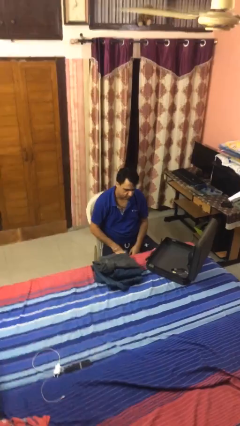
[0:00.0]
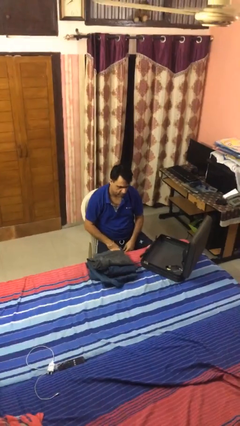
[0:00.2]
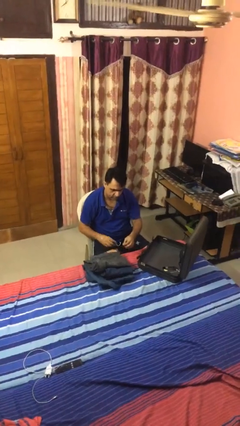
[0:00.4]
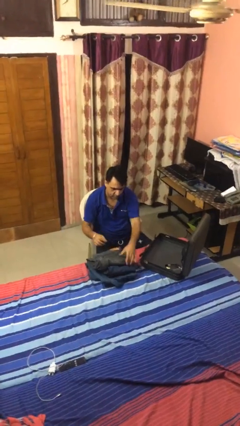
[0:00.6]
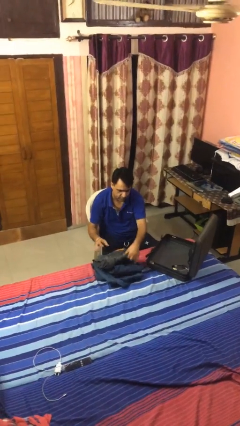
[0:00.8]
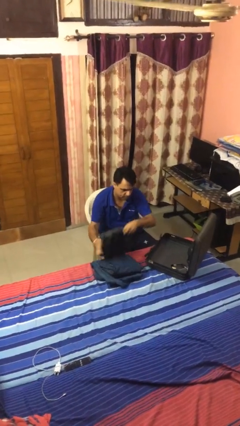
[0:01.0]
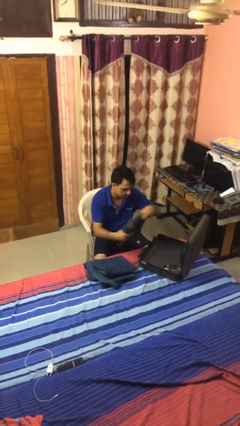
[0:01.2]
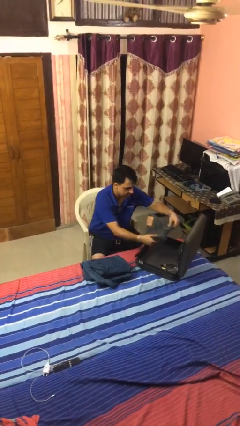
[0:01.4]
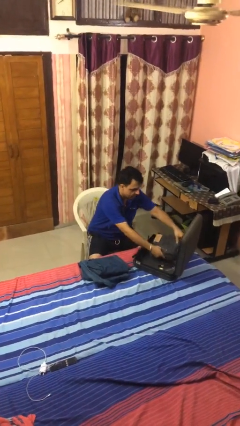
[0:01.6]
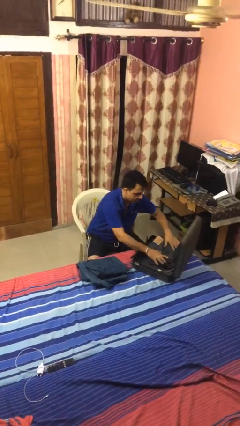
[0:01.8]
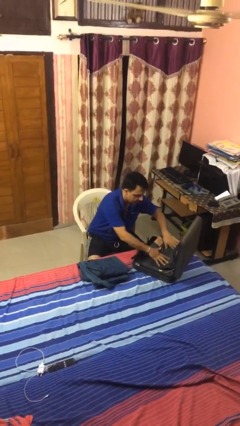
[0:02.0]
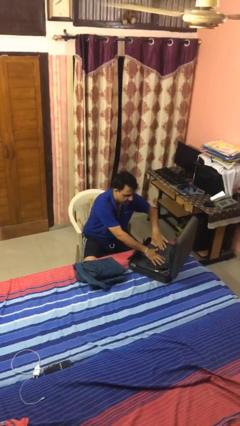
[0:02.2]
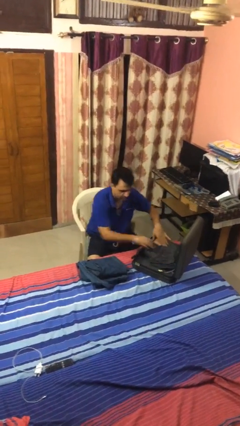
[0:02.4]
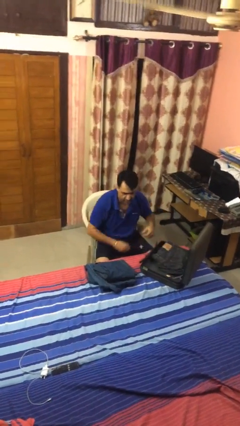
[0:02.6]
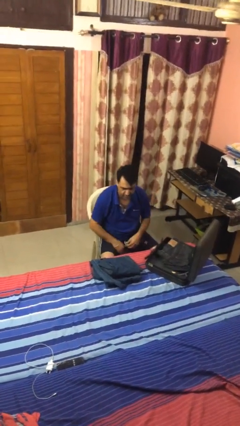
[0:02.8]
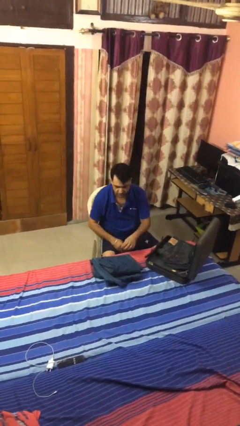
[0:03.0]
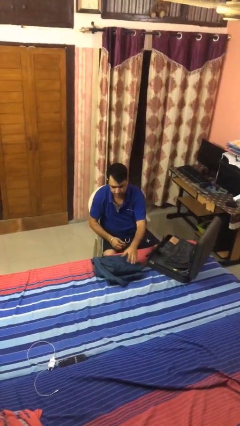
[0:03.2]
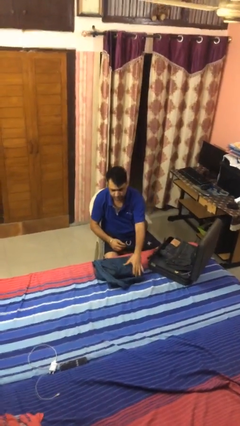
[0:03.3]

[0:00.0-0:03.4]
person loads clothes into suitcase

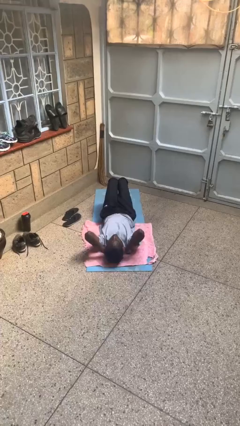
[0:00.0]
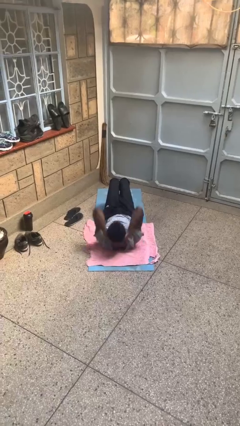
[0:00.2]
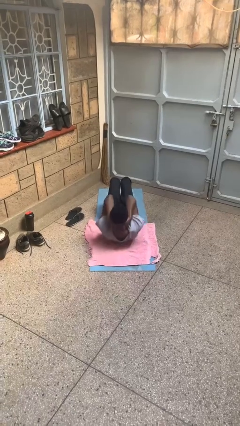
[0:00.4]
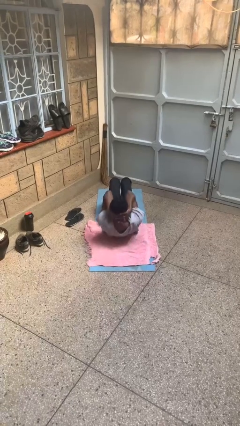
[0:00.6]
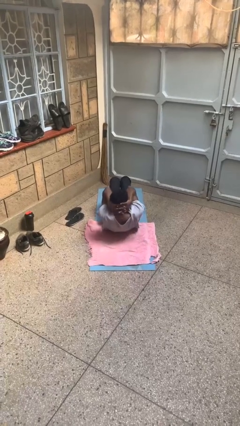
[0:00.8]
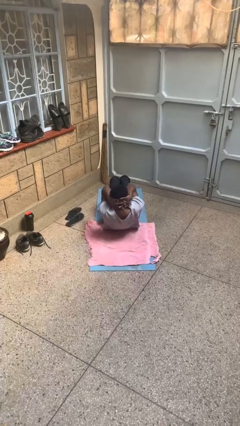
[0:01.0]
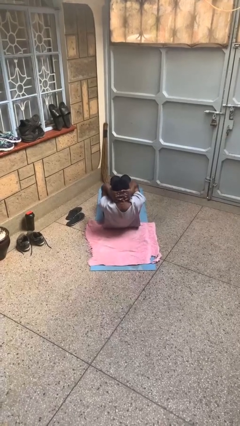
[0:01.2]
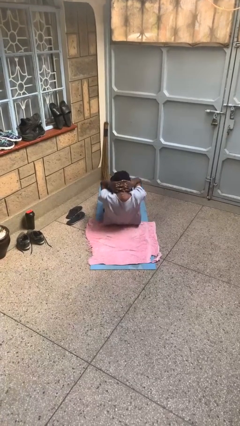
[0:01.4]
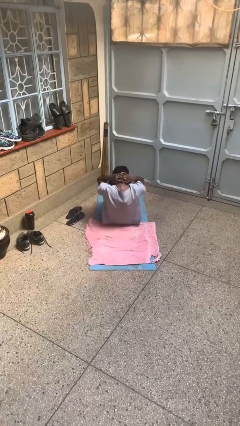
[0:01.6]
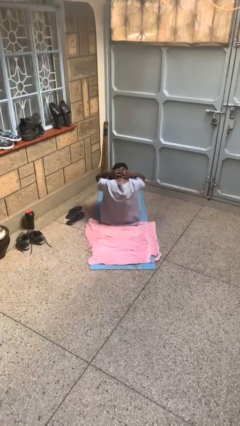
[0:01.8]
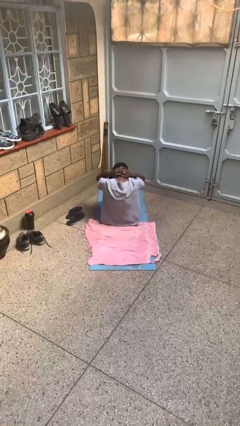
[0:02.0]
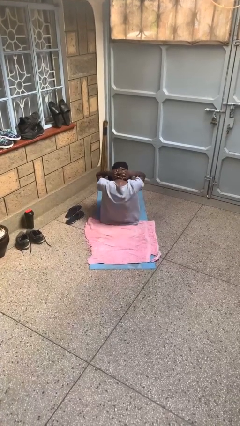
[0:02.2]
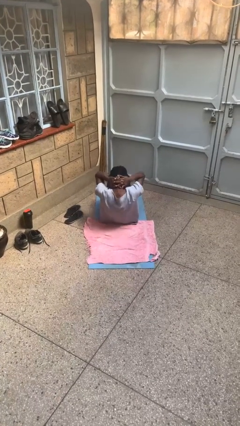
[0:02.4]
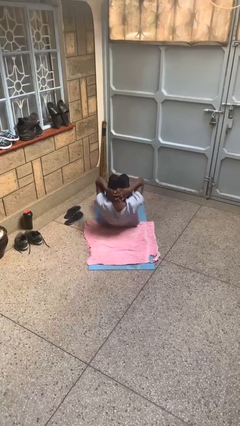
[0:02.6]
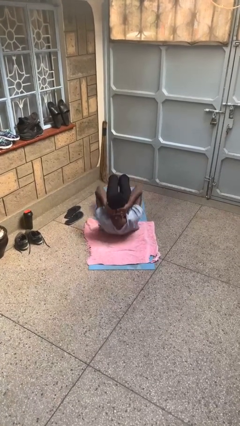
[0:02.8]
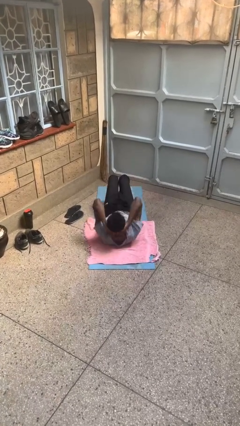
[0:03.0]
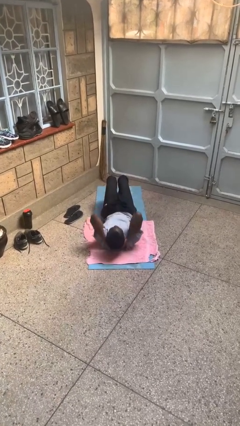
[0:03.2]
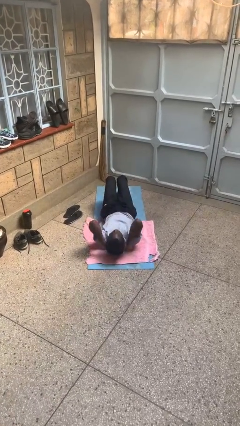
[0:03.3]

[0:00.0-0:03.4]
person exercises with situp

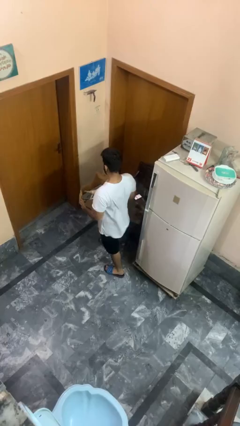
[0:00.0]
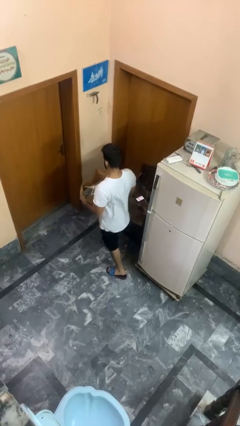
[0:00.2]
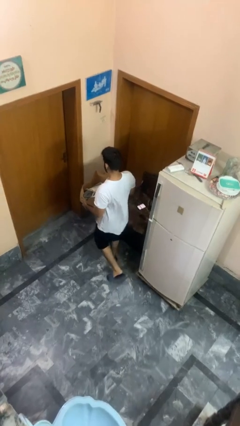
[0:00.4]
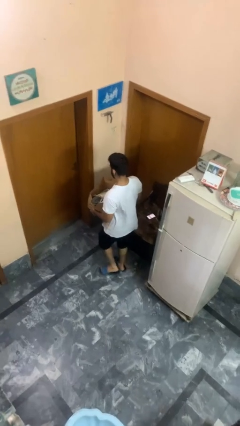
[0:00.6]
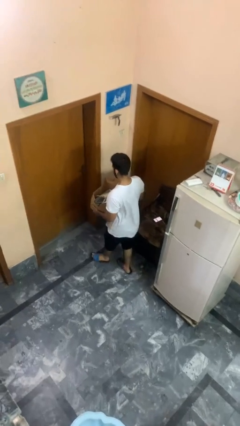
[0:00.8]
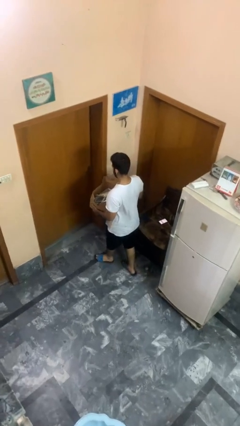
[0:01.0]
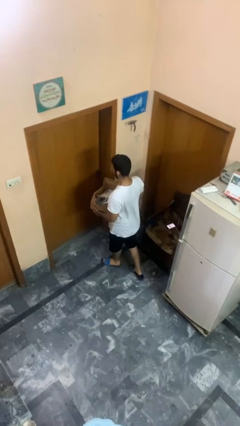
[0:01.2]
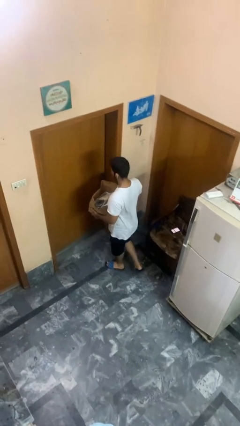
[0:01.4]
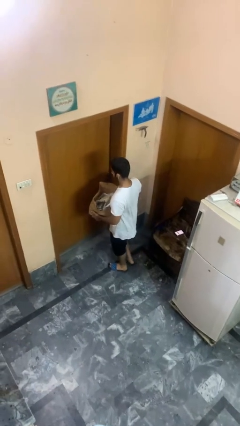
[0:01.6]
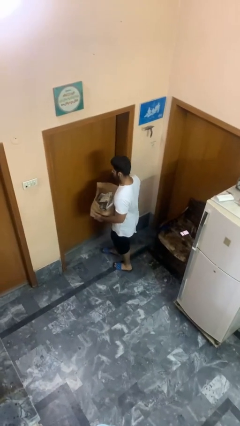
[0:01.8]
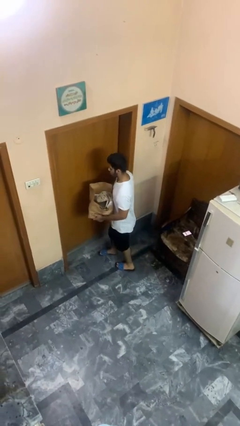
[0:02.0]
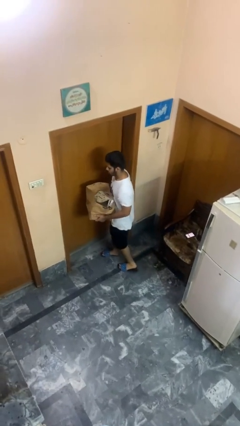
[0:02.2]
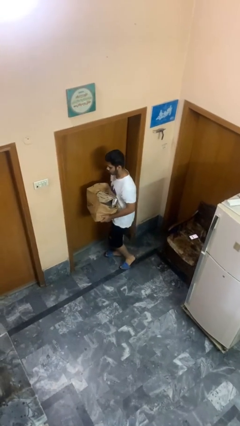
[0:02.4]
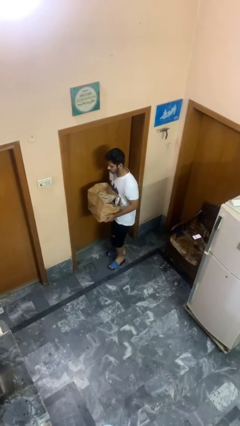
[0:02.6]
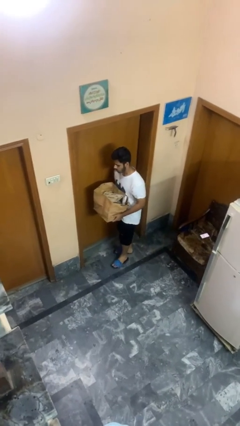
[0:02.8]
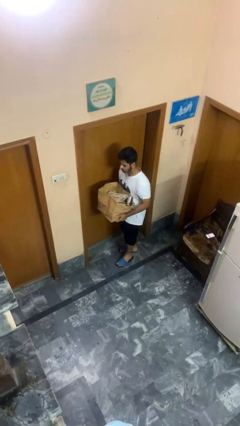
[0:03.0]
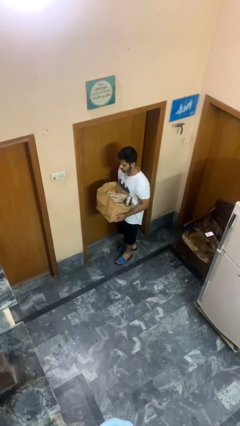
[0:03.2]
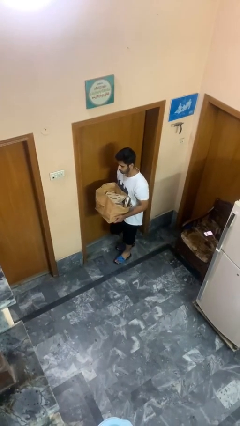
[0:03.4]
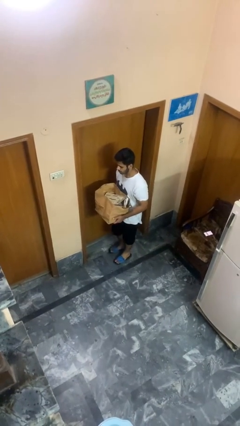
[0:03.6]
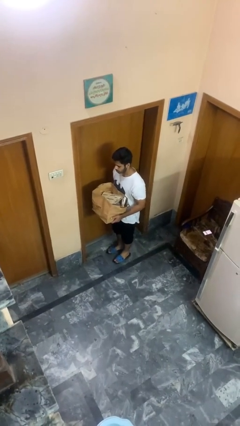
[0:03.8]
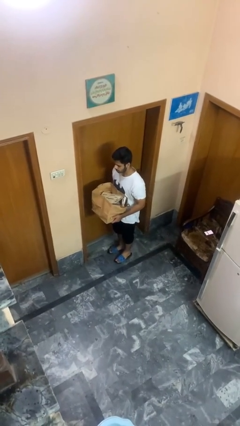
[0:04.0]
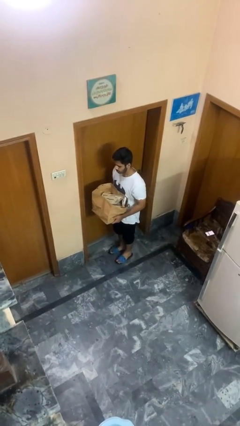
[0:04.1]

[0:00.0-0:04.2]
person carries groceries

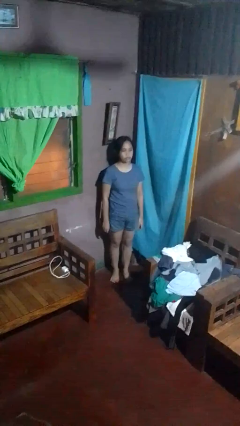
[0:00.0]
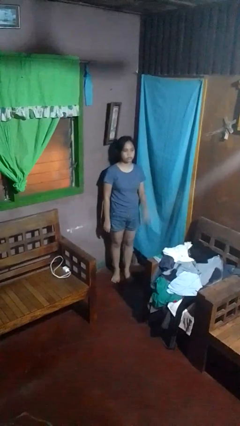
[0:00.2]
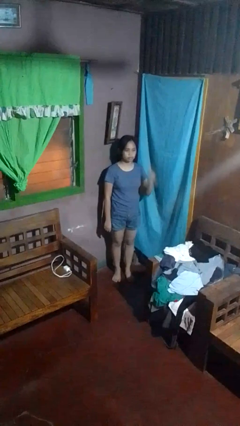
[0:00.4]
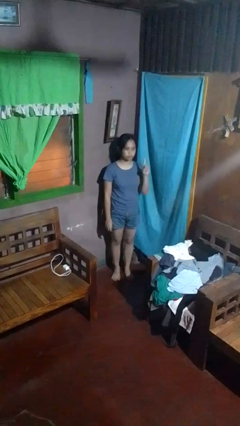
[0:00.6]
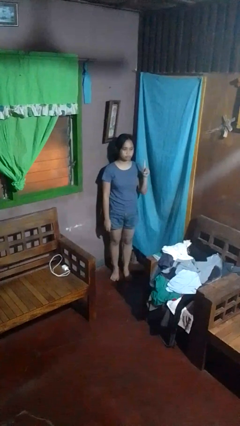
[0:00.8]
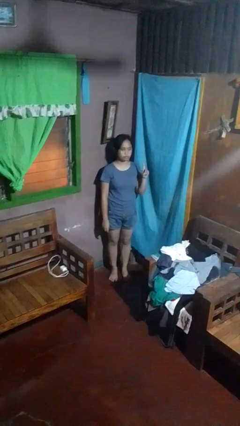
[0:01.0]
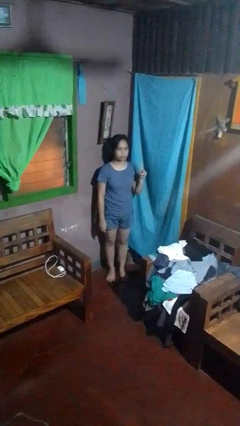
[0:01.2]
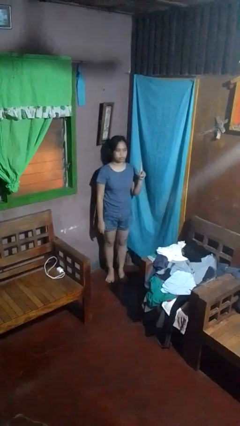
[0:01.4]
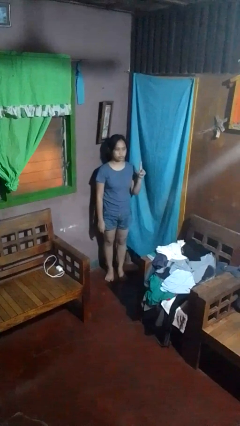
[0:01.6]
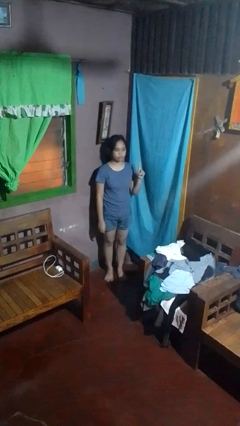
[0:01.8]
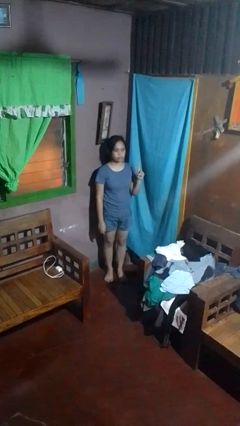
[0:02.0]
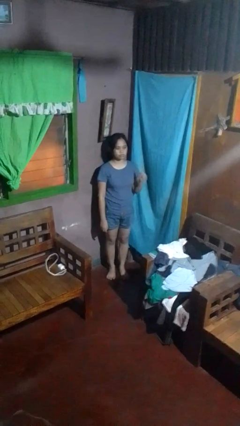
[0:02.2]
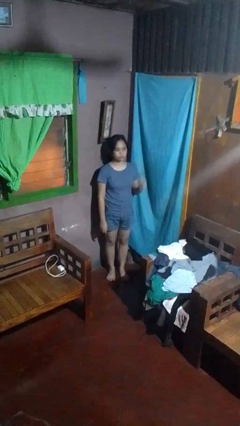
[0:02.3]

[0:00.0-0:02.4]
person gestures number one

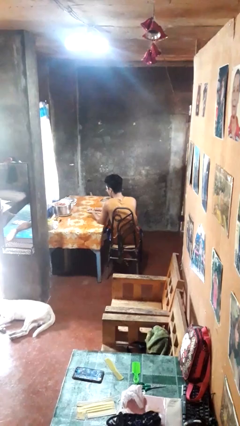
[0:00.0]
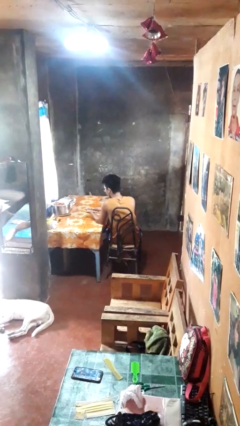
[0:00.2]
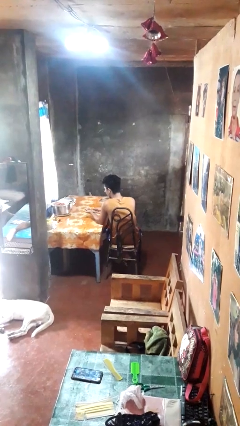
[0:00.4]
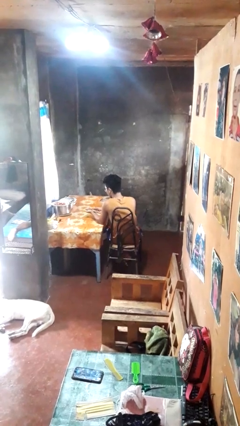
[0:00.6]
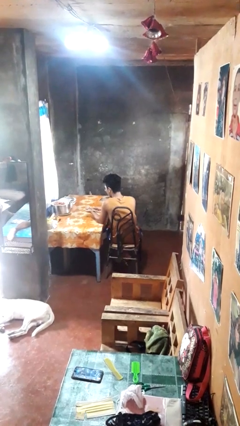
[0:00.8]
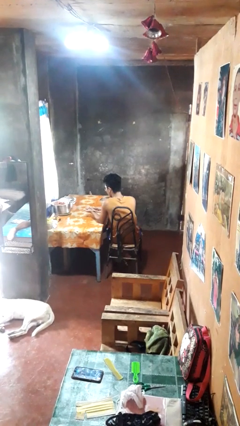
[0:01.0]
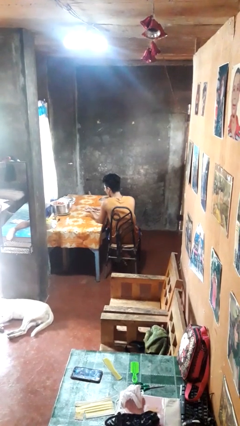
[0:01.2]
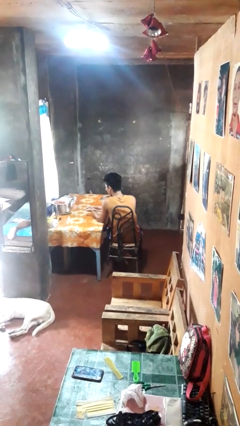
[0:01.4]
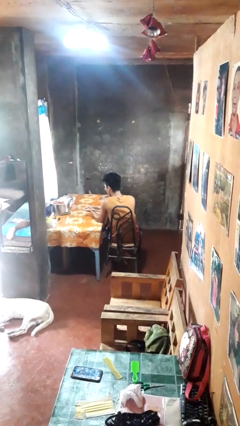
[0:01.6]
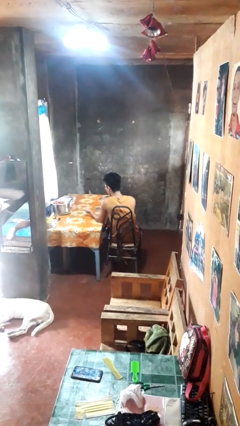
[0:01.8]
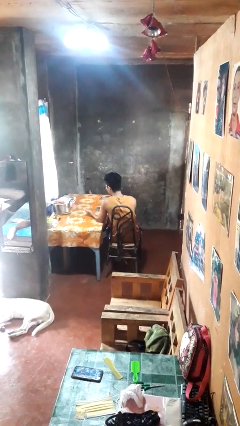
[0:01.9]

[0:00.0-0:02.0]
person clips fingernails

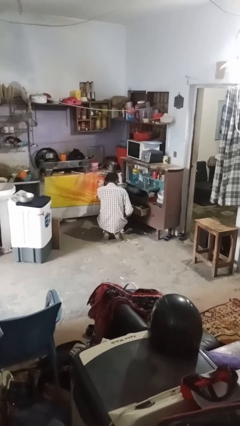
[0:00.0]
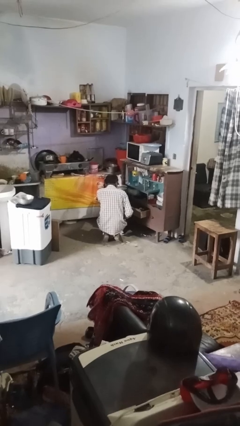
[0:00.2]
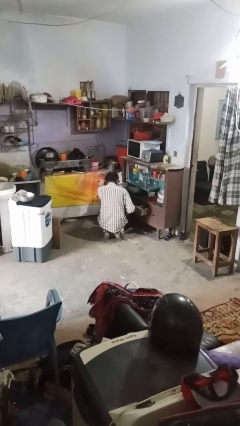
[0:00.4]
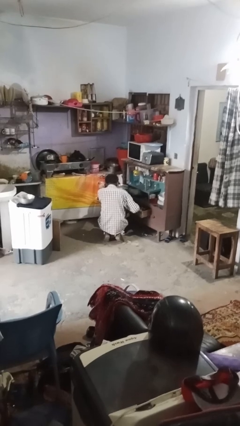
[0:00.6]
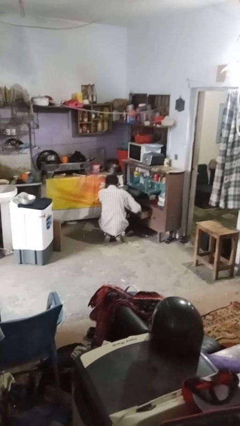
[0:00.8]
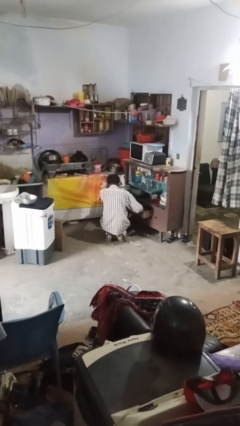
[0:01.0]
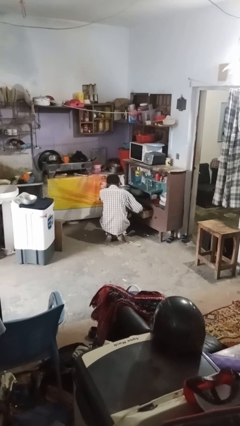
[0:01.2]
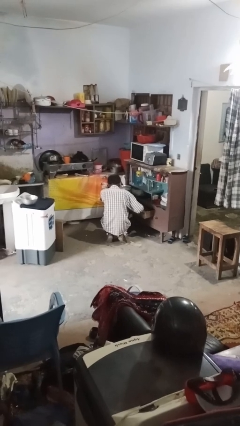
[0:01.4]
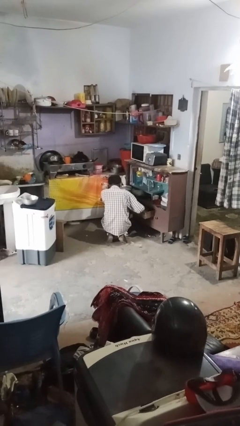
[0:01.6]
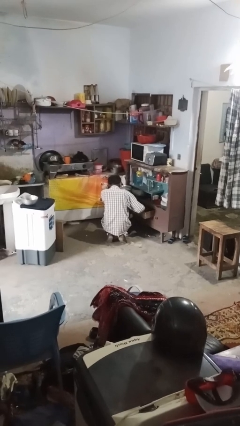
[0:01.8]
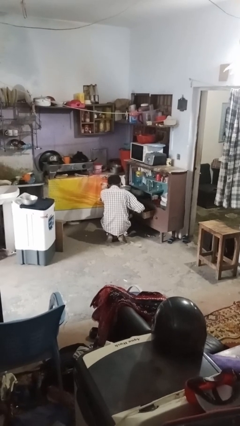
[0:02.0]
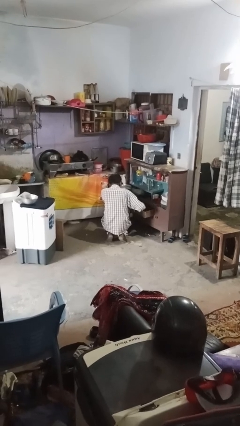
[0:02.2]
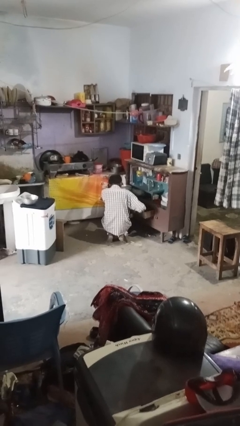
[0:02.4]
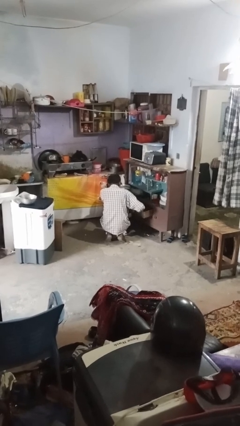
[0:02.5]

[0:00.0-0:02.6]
person searches in kitchen drawer
